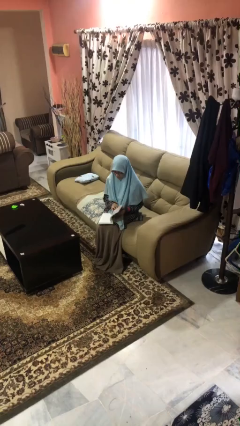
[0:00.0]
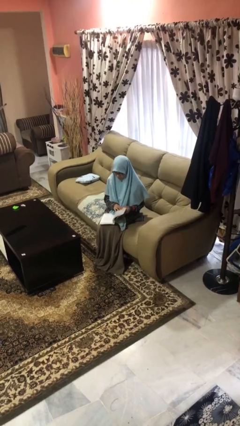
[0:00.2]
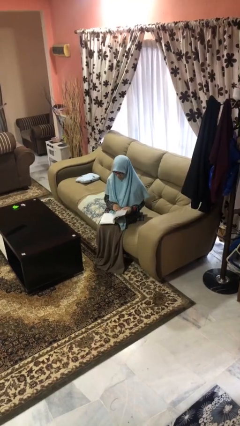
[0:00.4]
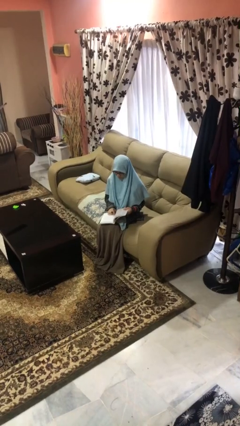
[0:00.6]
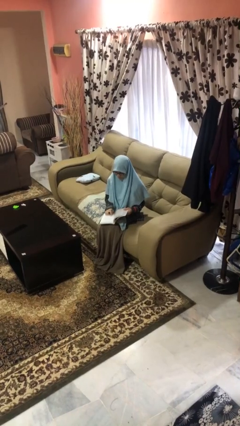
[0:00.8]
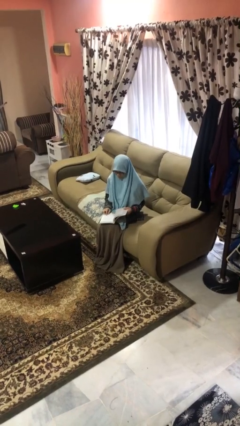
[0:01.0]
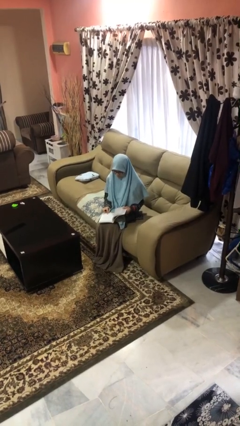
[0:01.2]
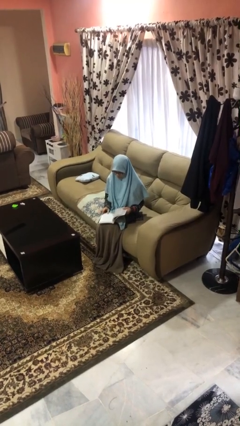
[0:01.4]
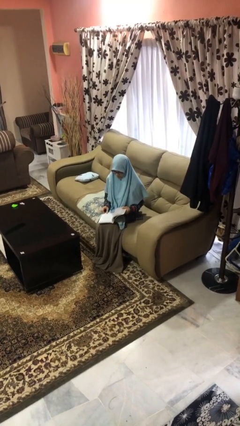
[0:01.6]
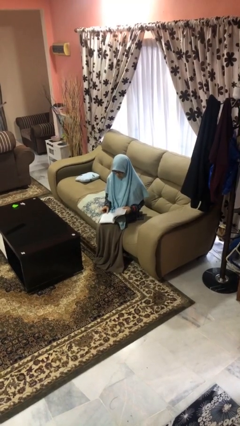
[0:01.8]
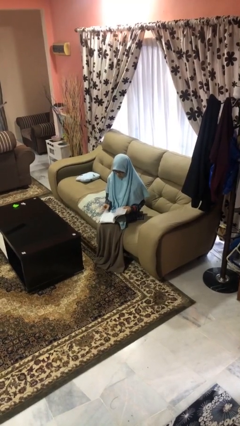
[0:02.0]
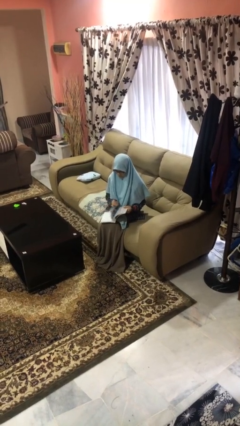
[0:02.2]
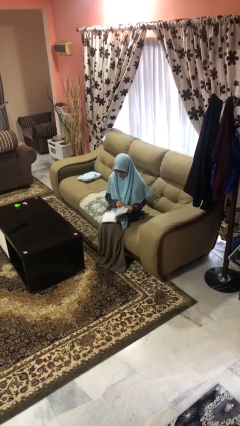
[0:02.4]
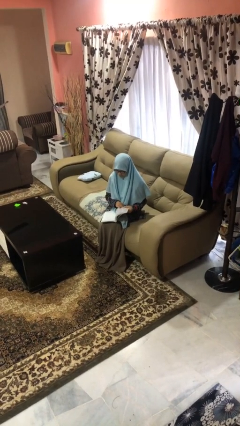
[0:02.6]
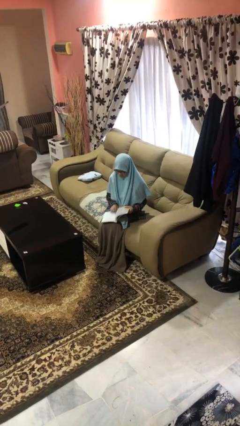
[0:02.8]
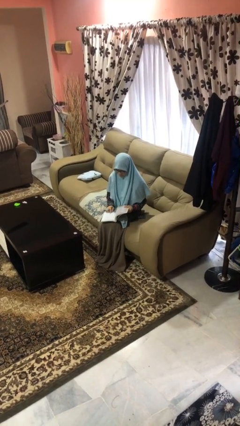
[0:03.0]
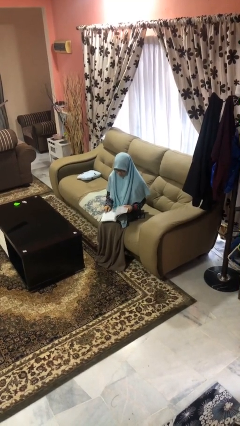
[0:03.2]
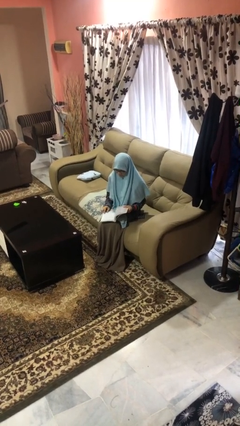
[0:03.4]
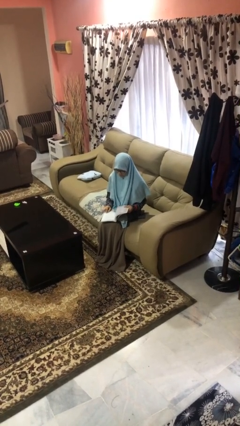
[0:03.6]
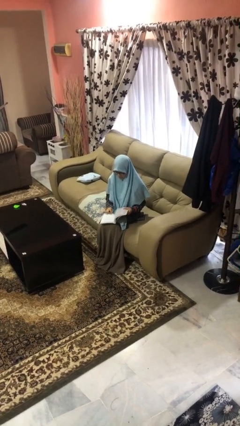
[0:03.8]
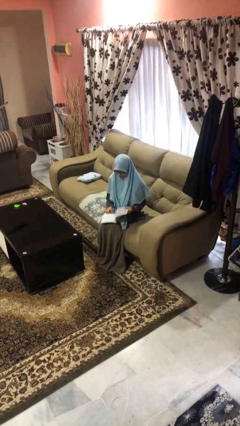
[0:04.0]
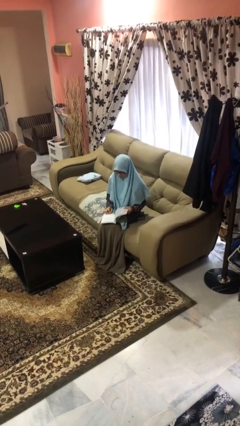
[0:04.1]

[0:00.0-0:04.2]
person reads book

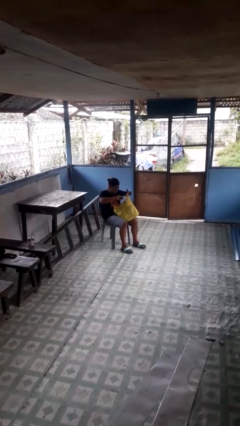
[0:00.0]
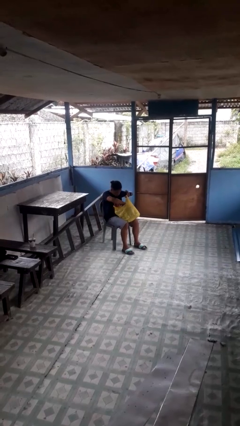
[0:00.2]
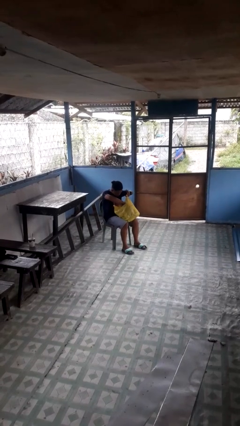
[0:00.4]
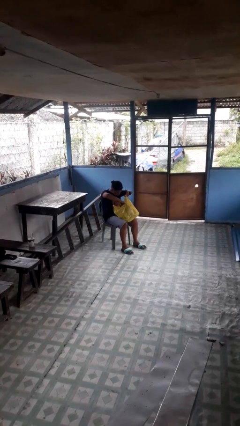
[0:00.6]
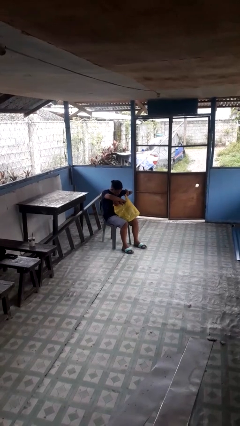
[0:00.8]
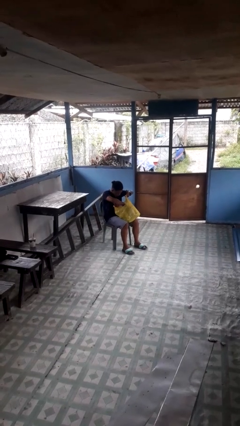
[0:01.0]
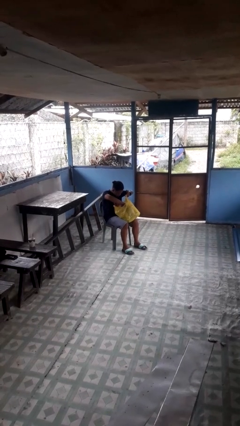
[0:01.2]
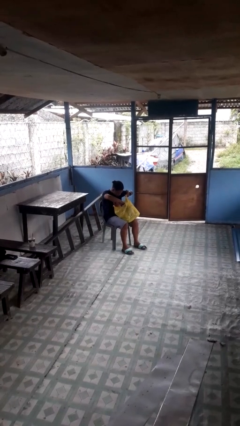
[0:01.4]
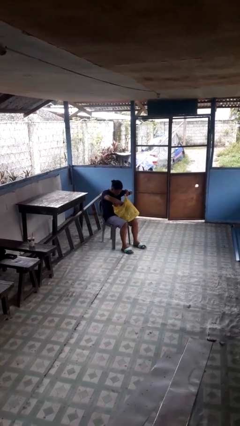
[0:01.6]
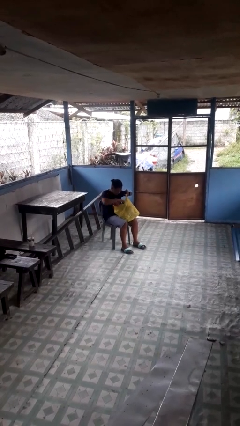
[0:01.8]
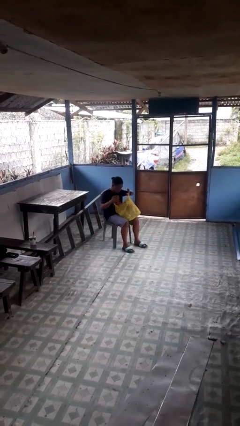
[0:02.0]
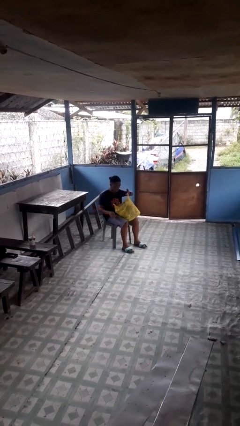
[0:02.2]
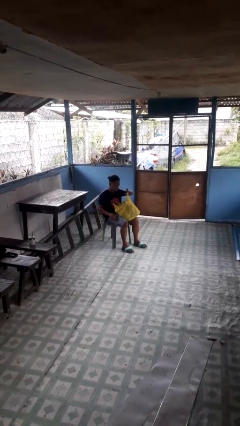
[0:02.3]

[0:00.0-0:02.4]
person searches in bag

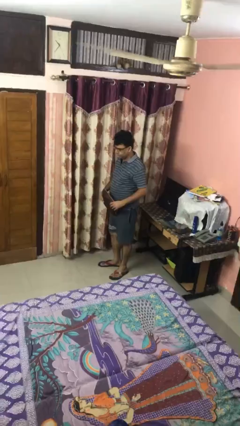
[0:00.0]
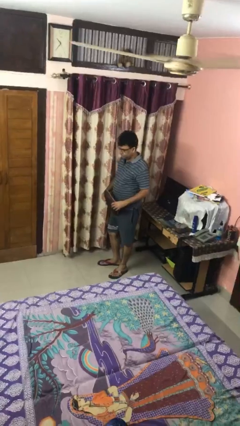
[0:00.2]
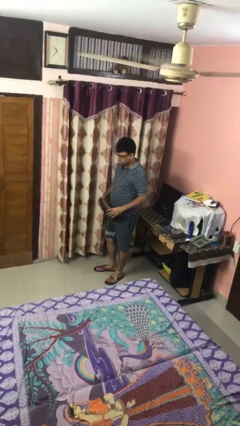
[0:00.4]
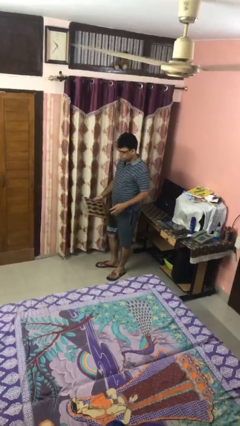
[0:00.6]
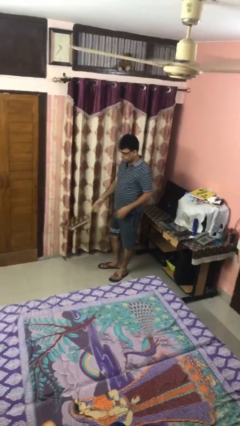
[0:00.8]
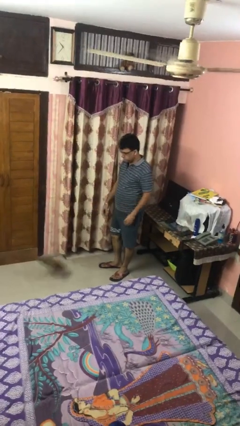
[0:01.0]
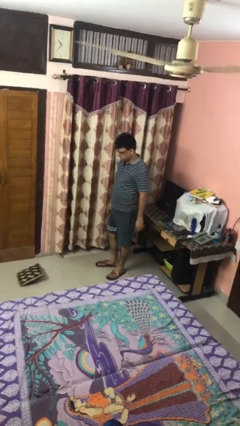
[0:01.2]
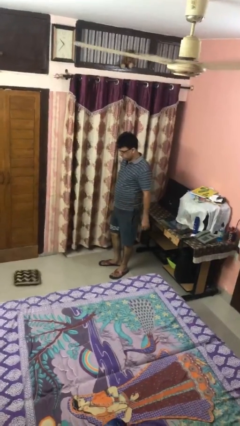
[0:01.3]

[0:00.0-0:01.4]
person throws object to ground

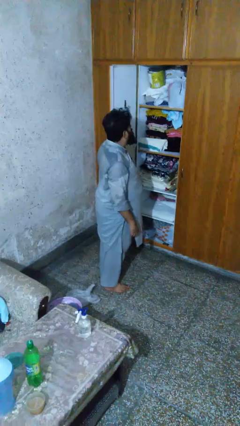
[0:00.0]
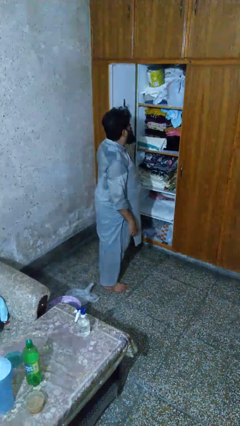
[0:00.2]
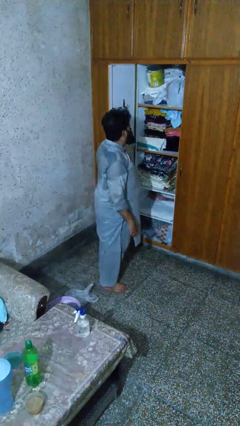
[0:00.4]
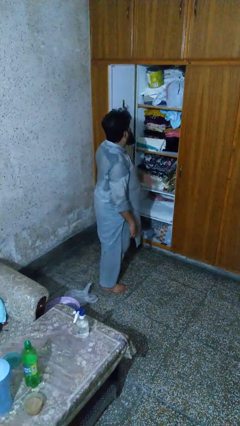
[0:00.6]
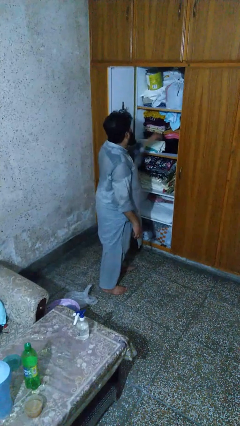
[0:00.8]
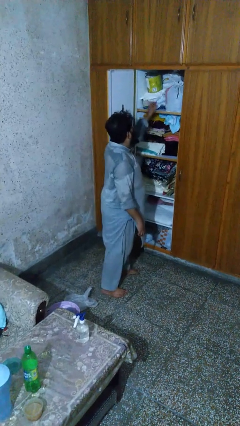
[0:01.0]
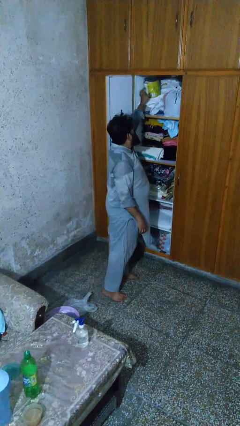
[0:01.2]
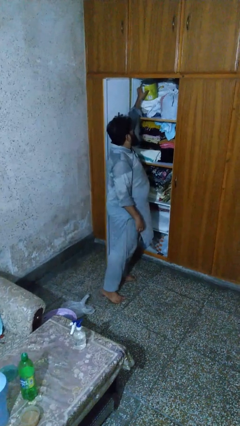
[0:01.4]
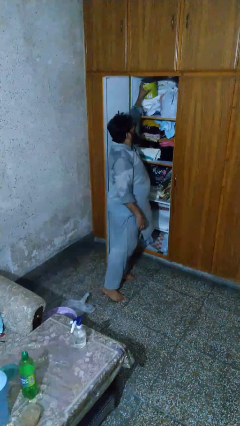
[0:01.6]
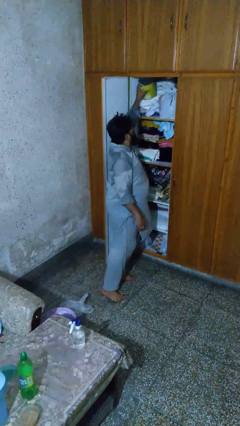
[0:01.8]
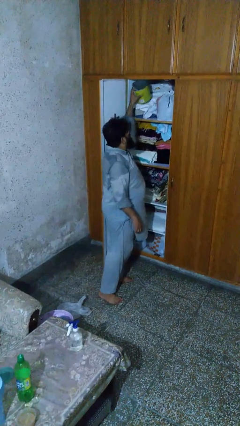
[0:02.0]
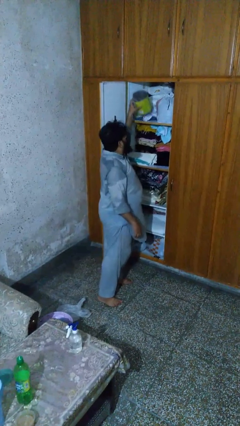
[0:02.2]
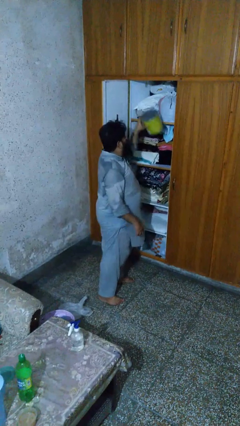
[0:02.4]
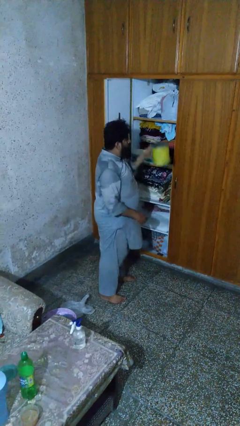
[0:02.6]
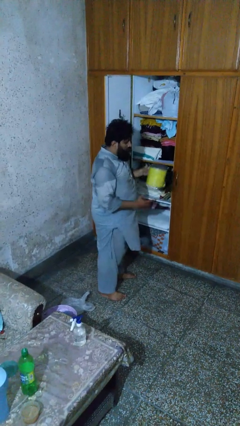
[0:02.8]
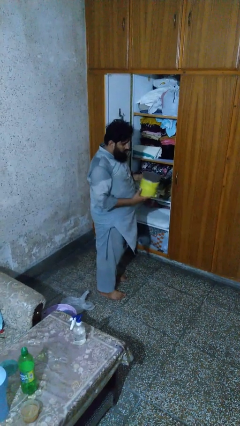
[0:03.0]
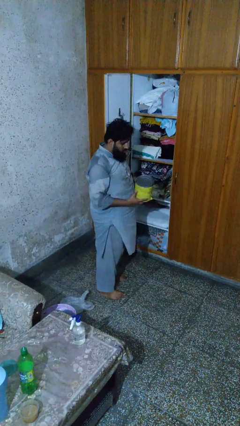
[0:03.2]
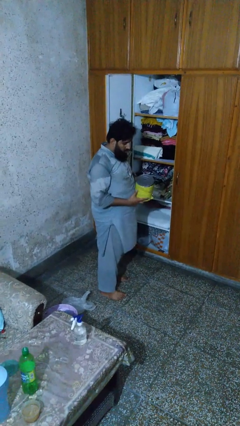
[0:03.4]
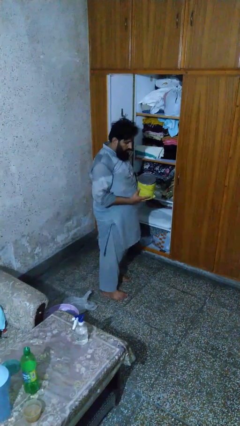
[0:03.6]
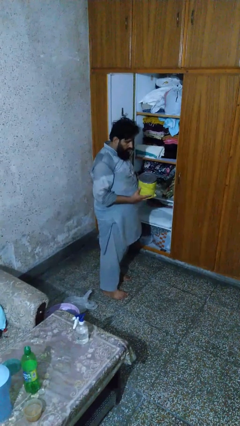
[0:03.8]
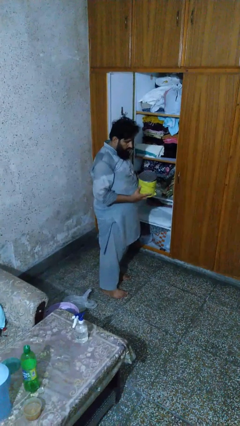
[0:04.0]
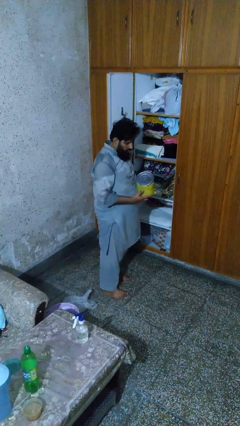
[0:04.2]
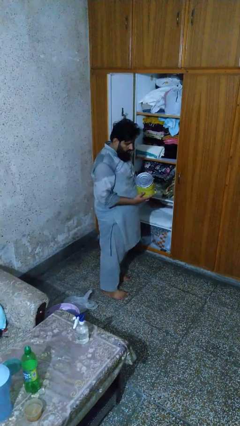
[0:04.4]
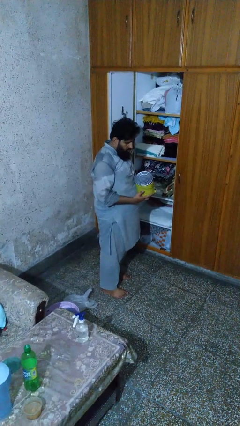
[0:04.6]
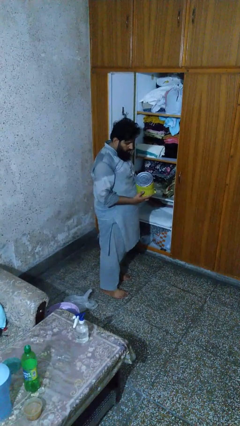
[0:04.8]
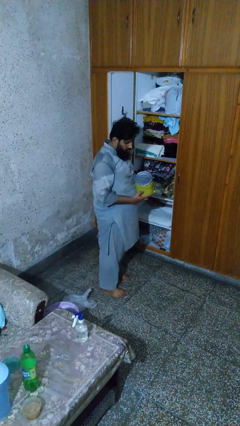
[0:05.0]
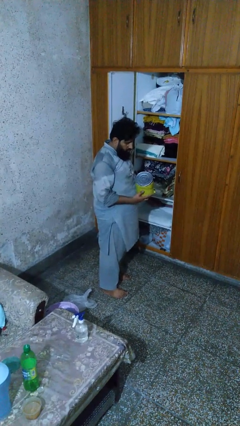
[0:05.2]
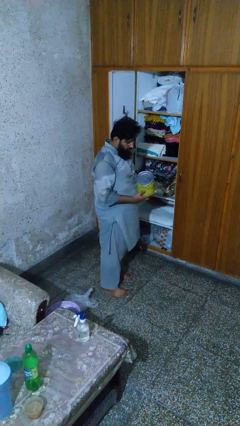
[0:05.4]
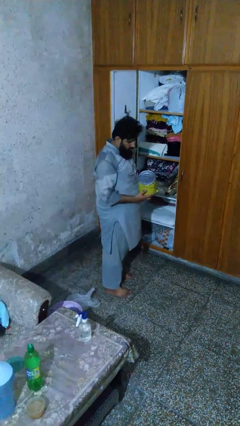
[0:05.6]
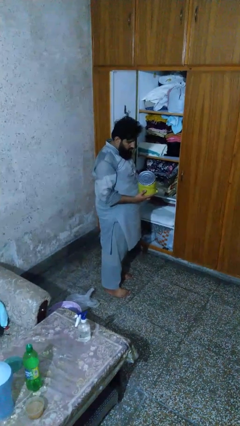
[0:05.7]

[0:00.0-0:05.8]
person picks up object from shelf

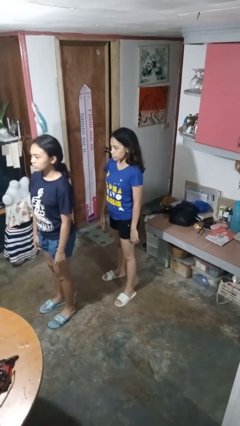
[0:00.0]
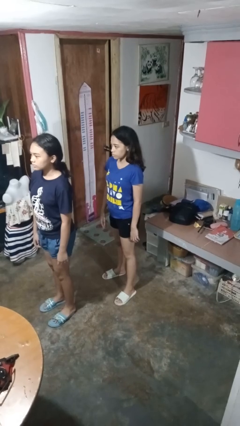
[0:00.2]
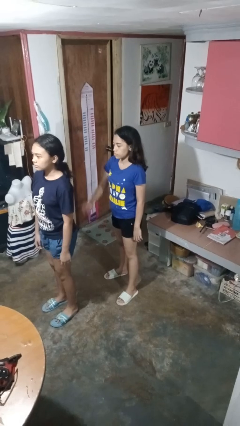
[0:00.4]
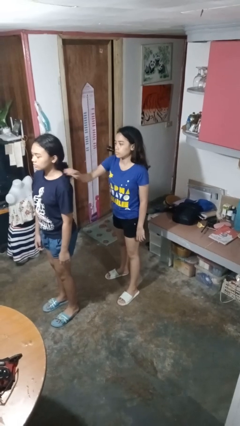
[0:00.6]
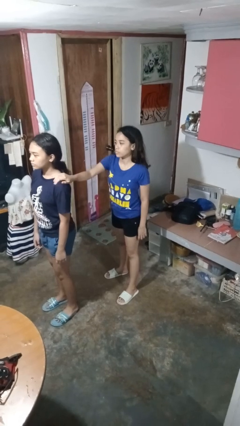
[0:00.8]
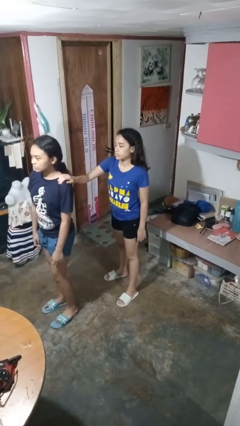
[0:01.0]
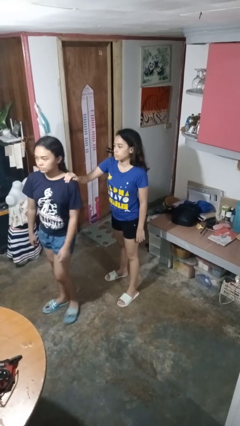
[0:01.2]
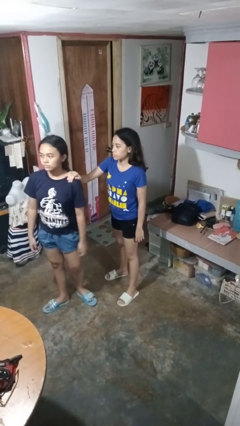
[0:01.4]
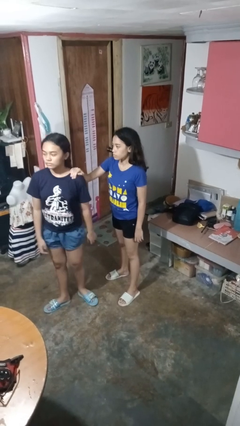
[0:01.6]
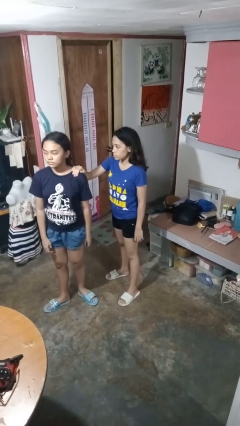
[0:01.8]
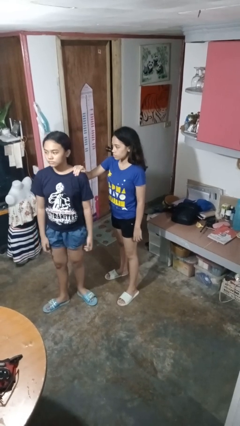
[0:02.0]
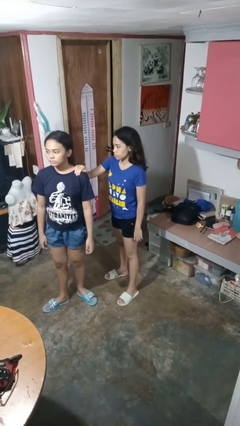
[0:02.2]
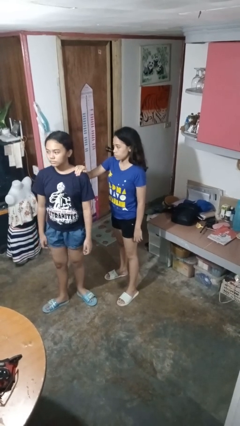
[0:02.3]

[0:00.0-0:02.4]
person grabs person by shoulder

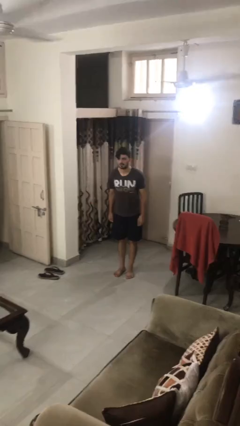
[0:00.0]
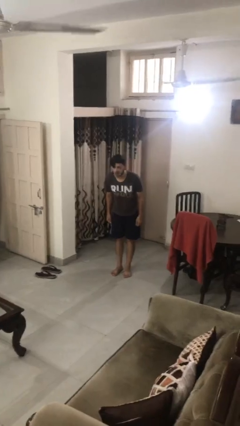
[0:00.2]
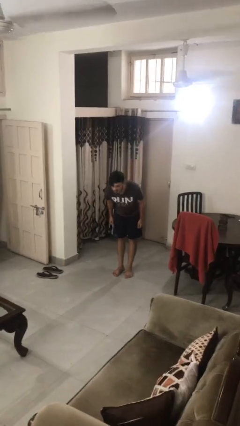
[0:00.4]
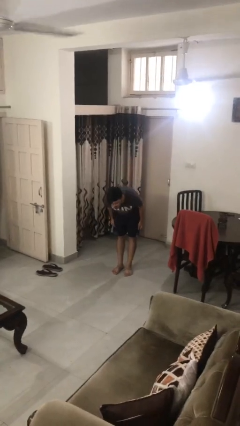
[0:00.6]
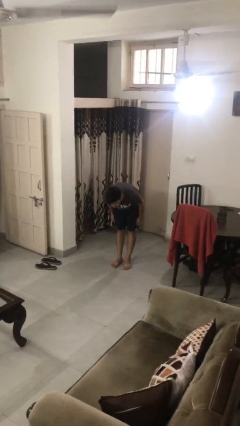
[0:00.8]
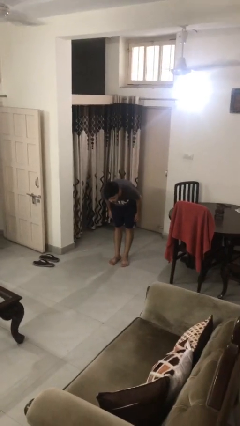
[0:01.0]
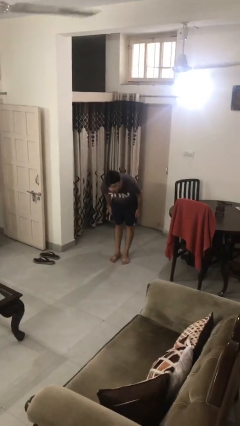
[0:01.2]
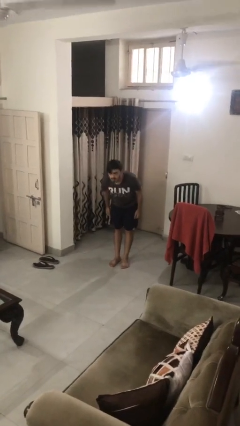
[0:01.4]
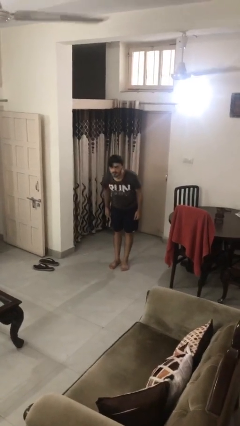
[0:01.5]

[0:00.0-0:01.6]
person bows
